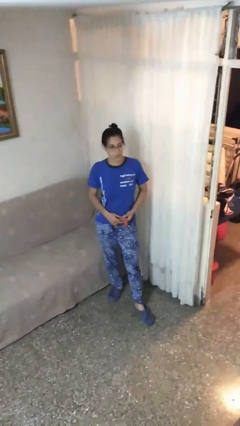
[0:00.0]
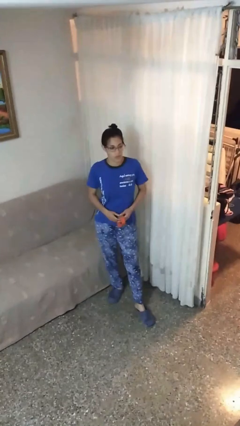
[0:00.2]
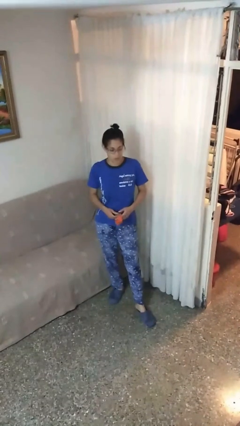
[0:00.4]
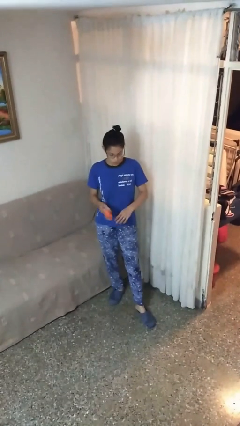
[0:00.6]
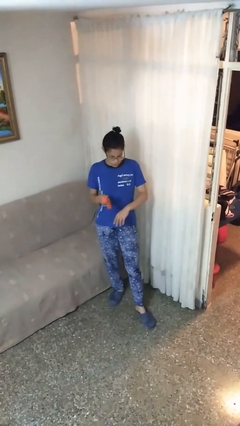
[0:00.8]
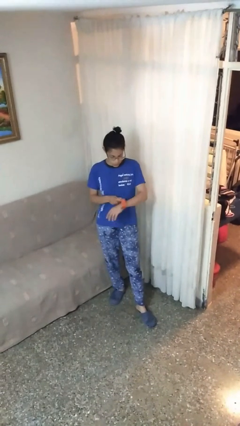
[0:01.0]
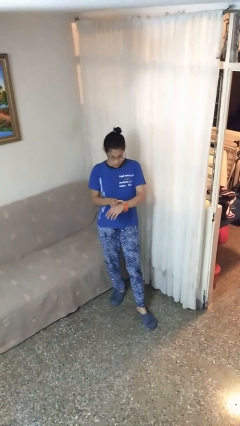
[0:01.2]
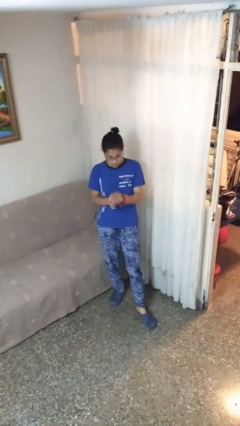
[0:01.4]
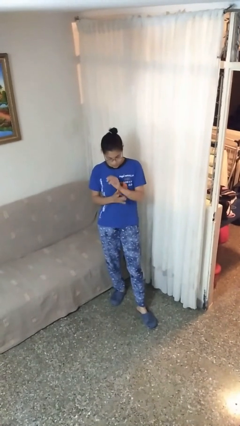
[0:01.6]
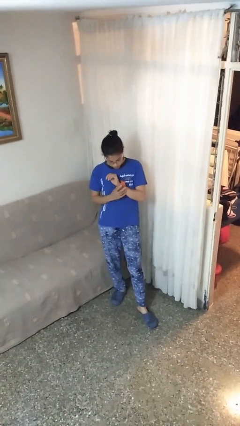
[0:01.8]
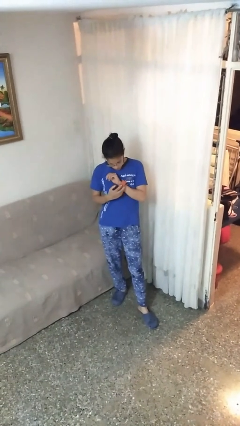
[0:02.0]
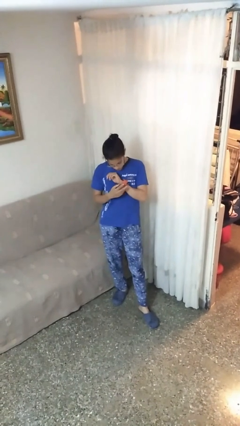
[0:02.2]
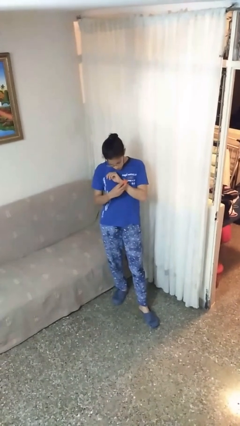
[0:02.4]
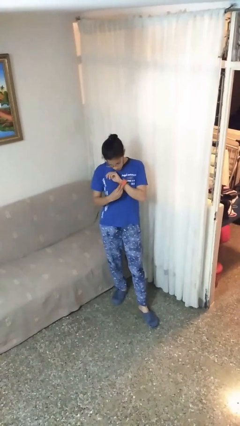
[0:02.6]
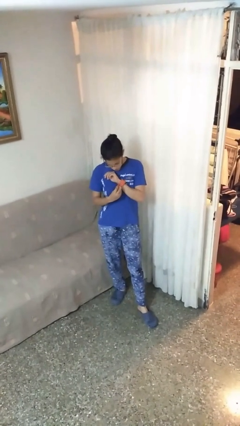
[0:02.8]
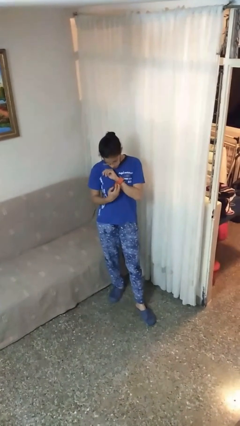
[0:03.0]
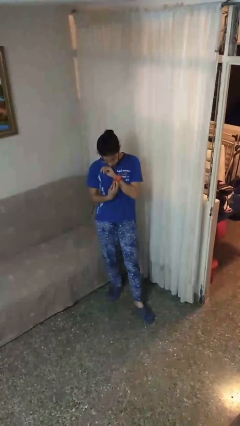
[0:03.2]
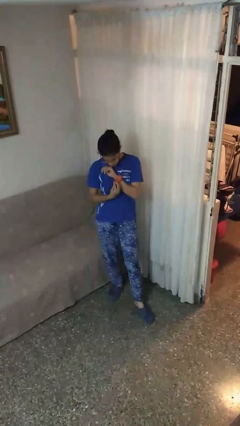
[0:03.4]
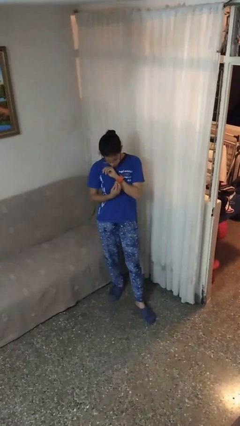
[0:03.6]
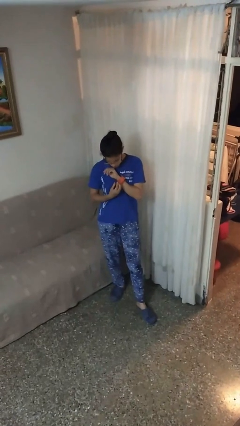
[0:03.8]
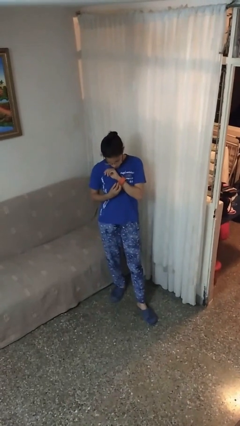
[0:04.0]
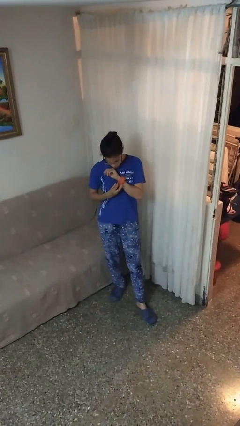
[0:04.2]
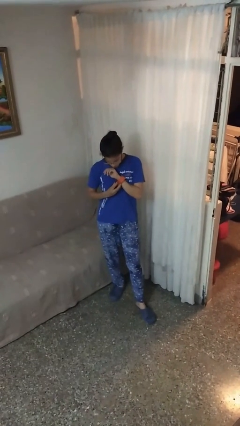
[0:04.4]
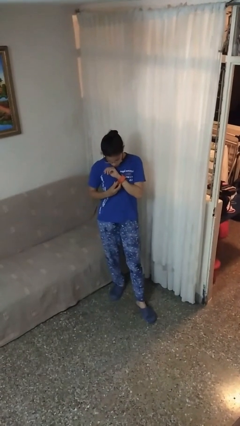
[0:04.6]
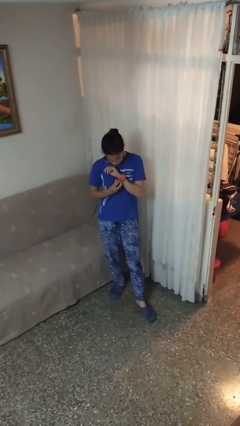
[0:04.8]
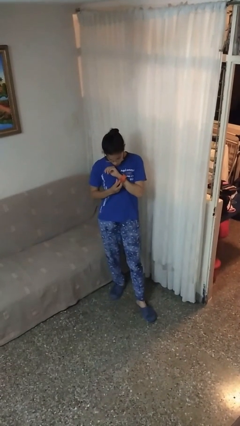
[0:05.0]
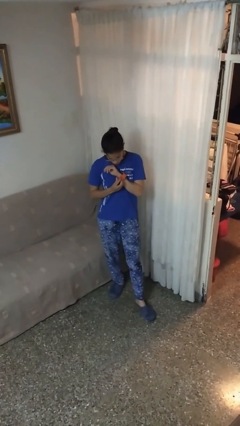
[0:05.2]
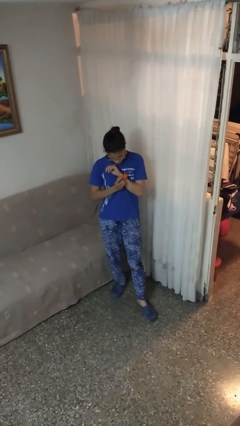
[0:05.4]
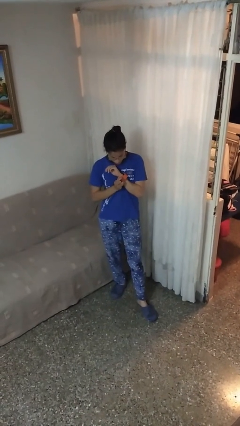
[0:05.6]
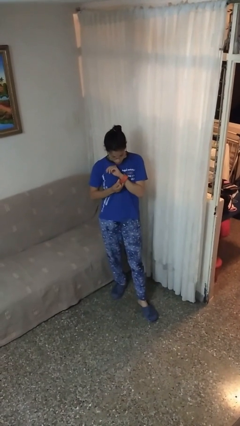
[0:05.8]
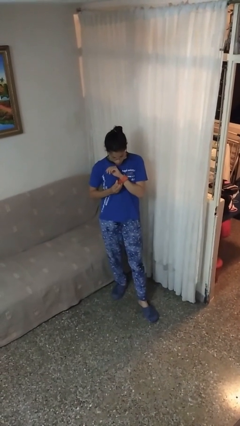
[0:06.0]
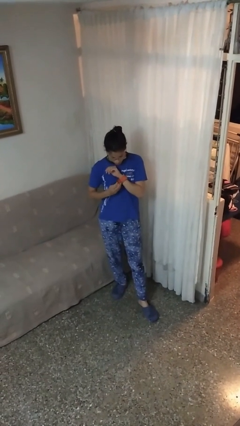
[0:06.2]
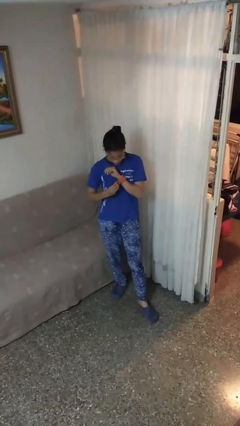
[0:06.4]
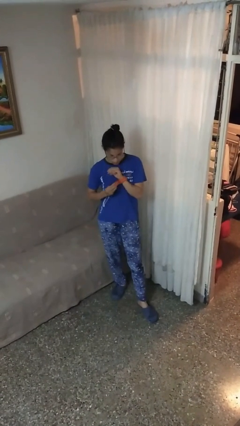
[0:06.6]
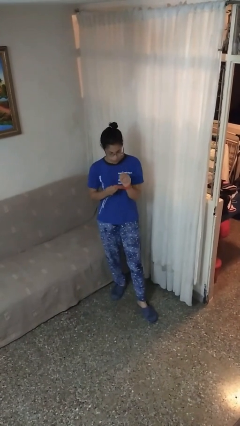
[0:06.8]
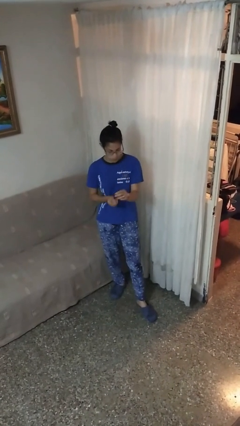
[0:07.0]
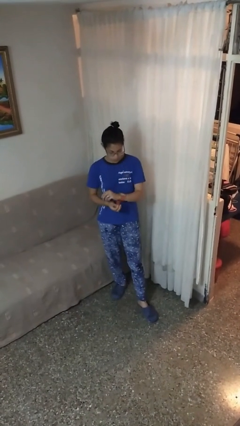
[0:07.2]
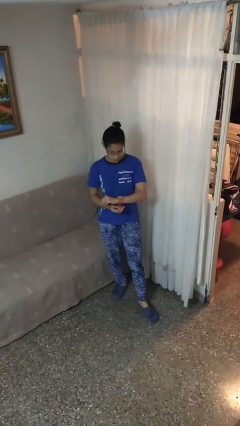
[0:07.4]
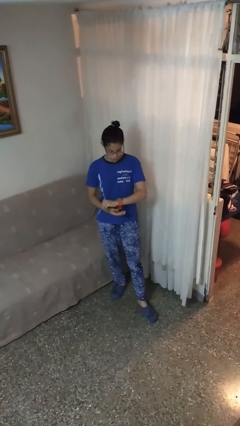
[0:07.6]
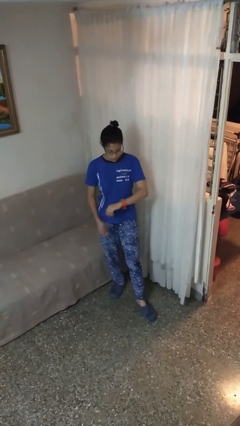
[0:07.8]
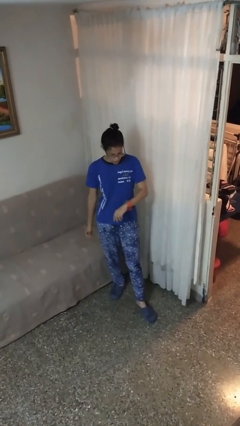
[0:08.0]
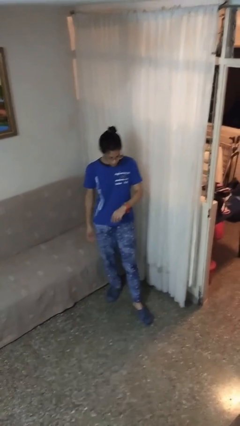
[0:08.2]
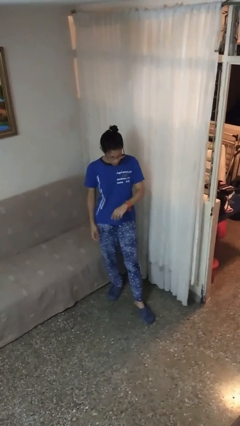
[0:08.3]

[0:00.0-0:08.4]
person puts on wristwatch

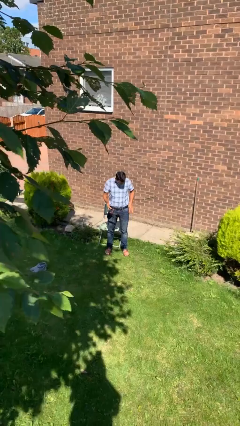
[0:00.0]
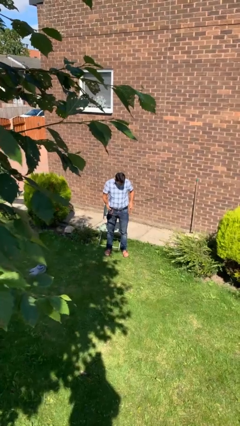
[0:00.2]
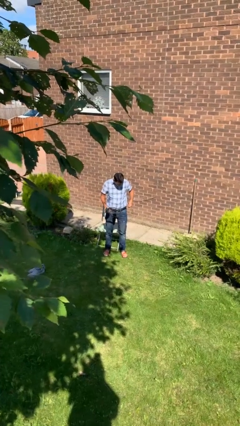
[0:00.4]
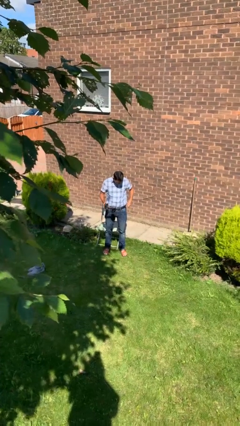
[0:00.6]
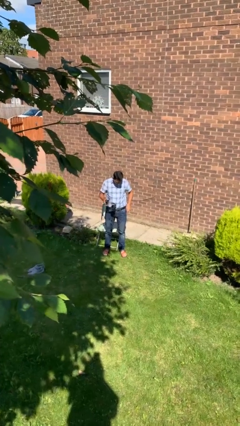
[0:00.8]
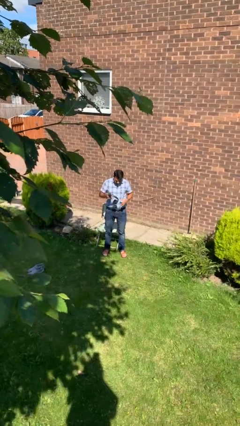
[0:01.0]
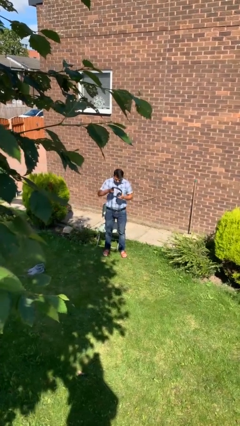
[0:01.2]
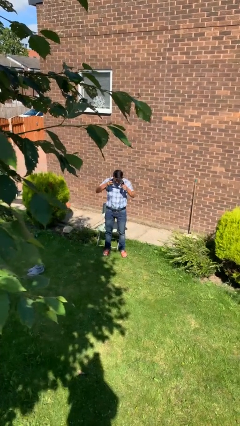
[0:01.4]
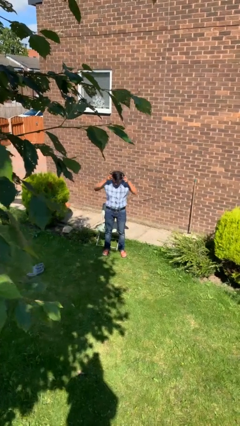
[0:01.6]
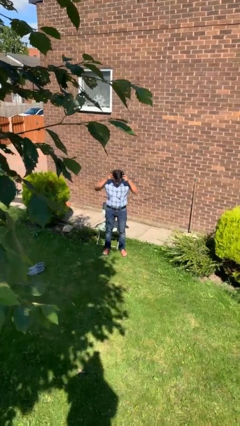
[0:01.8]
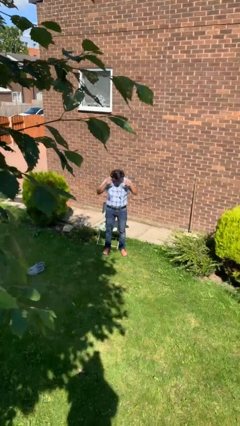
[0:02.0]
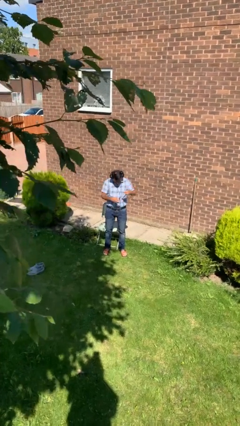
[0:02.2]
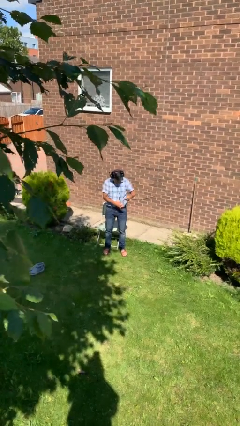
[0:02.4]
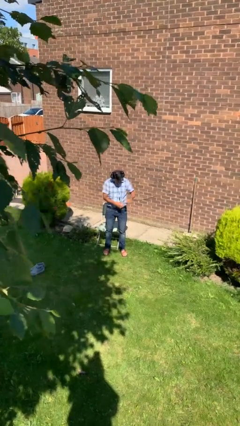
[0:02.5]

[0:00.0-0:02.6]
person puts on headphones

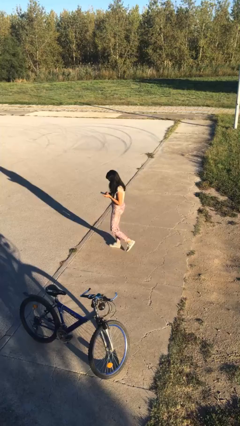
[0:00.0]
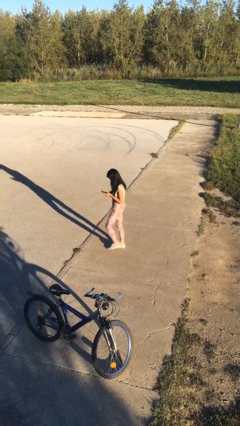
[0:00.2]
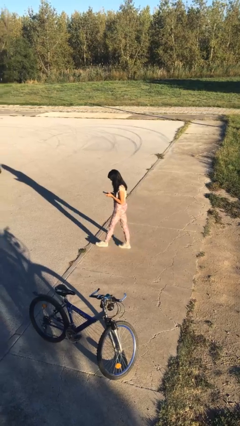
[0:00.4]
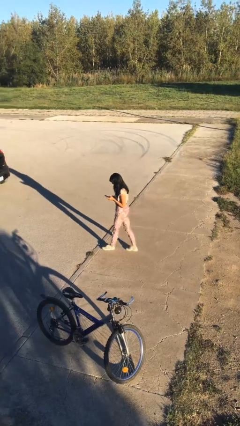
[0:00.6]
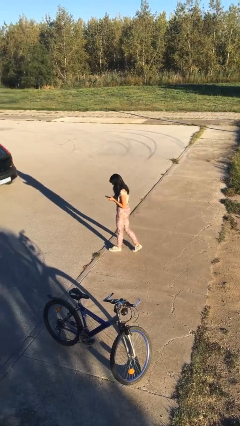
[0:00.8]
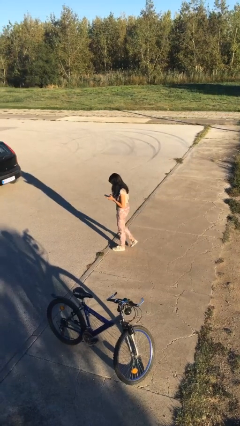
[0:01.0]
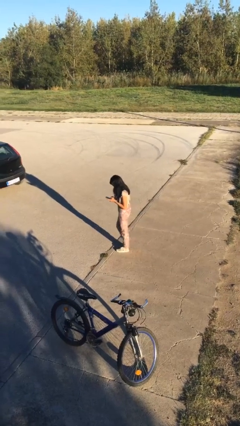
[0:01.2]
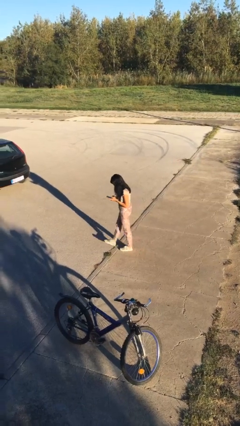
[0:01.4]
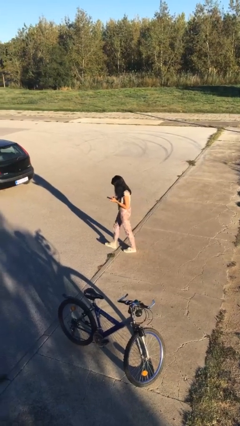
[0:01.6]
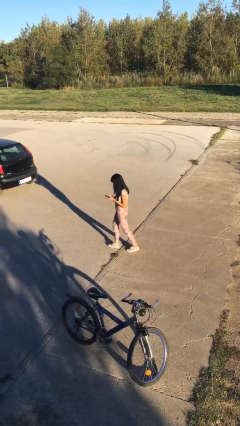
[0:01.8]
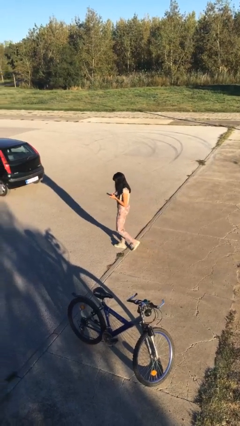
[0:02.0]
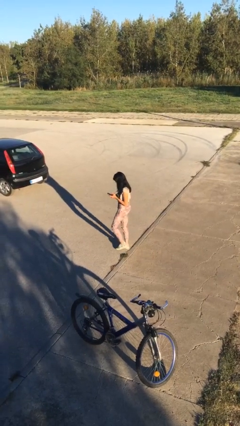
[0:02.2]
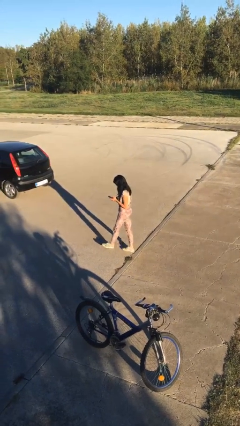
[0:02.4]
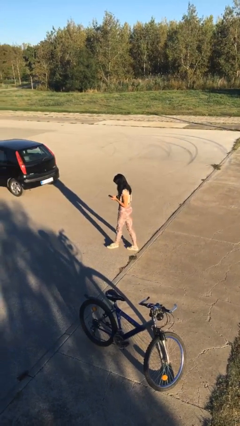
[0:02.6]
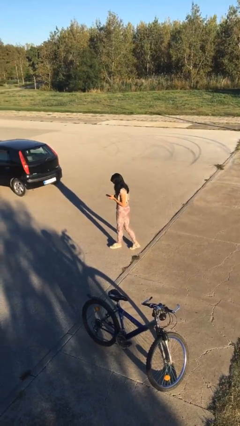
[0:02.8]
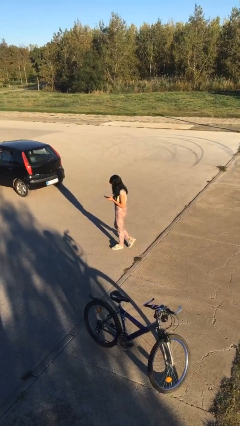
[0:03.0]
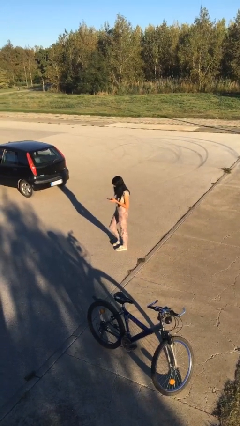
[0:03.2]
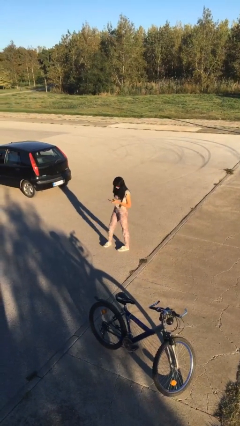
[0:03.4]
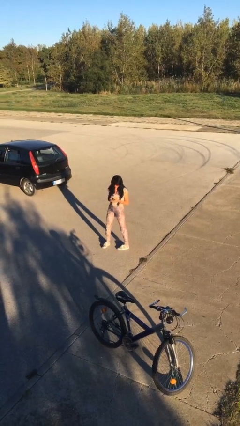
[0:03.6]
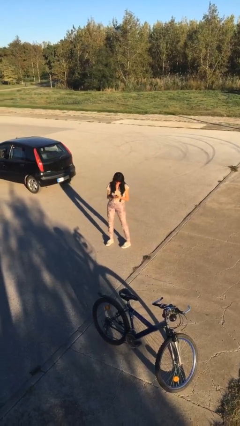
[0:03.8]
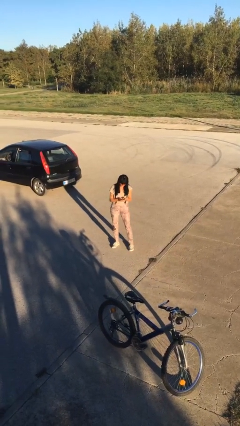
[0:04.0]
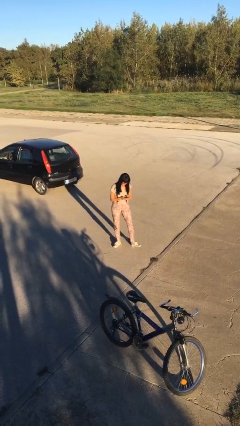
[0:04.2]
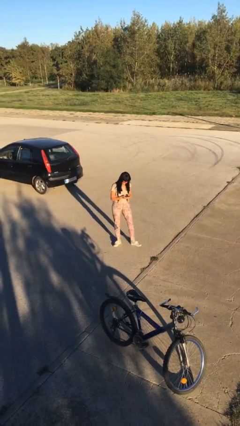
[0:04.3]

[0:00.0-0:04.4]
person texts on phone

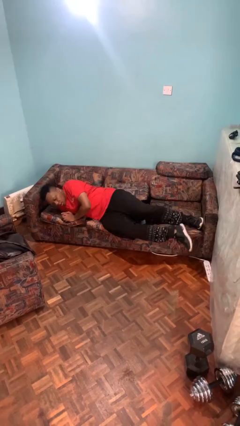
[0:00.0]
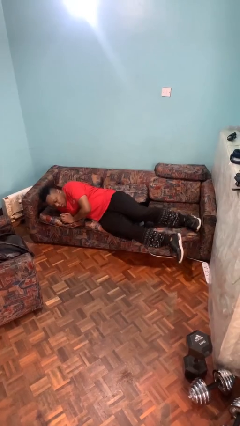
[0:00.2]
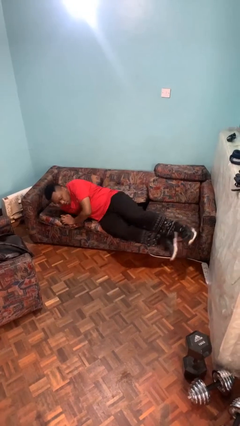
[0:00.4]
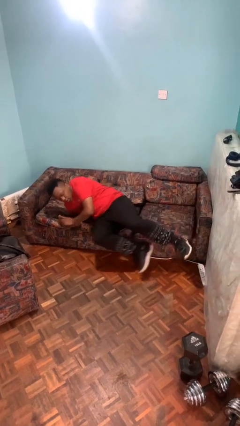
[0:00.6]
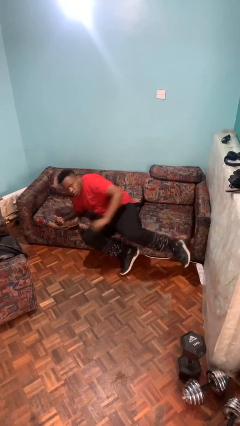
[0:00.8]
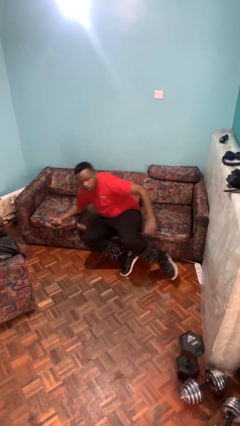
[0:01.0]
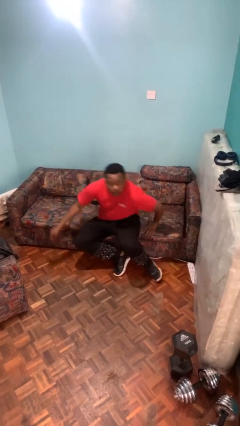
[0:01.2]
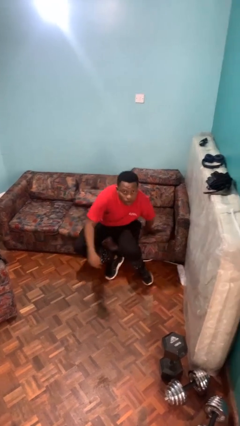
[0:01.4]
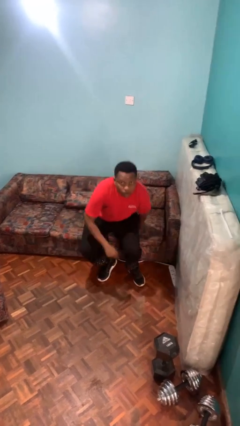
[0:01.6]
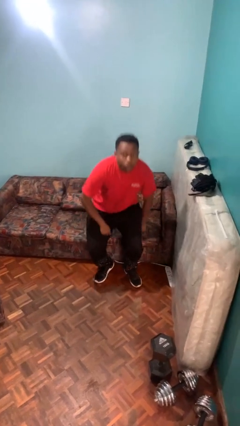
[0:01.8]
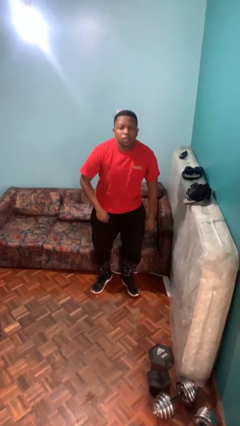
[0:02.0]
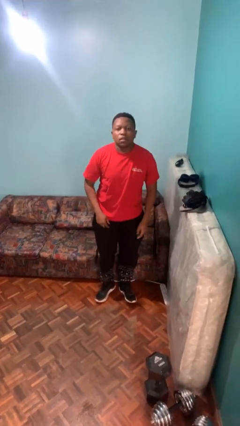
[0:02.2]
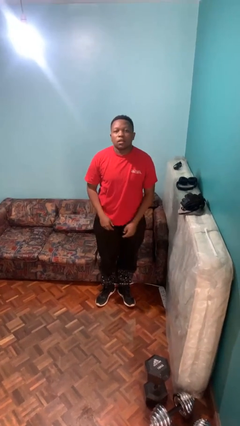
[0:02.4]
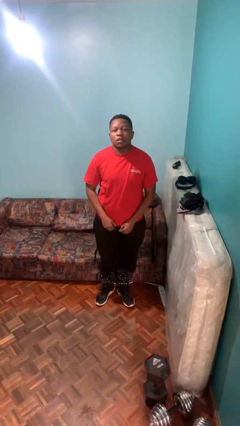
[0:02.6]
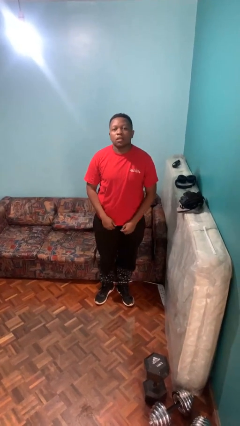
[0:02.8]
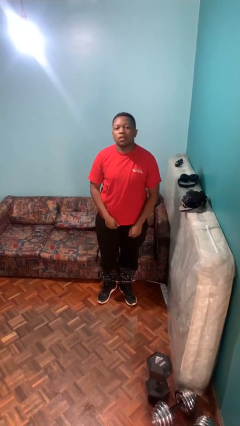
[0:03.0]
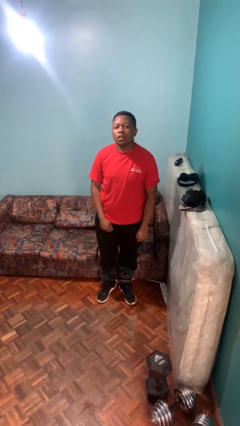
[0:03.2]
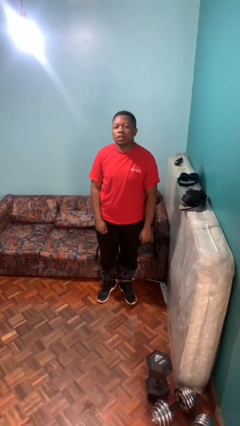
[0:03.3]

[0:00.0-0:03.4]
person stands up
